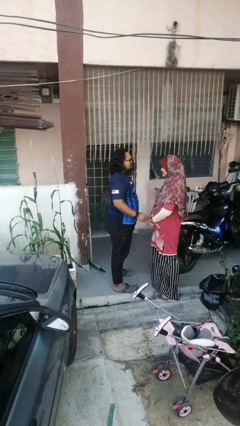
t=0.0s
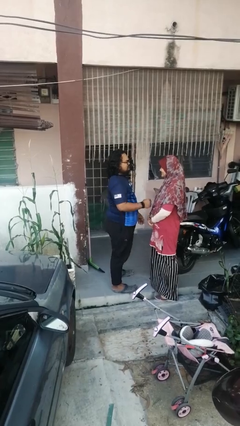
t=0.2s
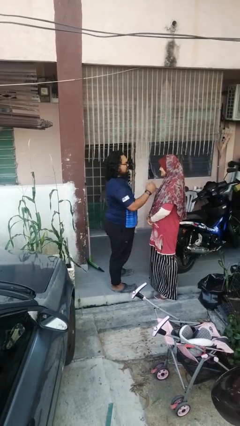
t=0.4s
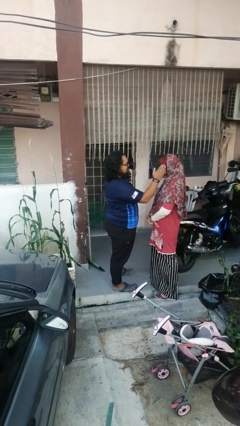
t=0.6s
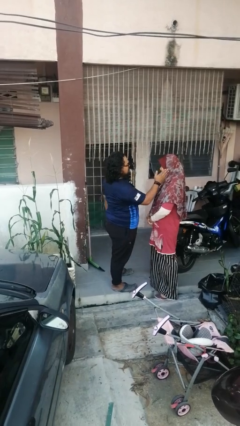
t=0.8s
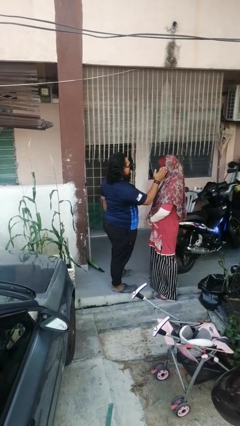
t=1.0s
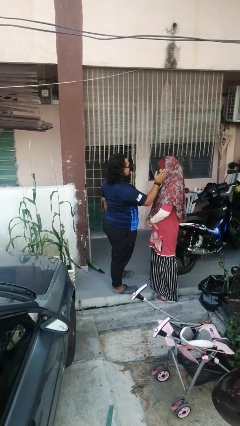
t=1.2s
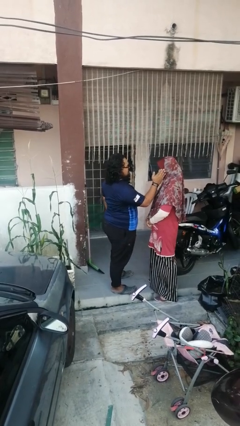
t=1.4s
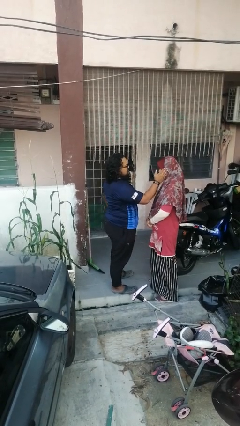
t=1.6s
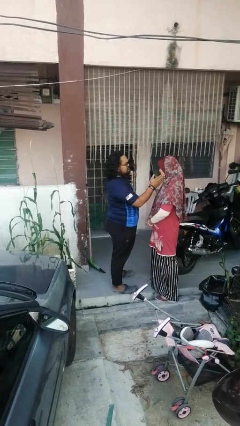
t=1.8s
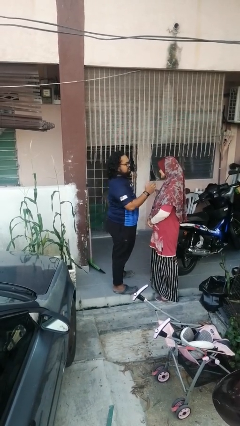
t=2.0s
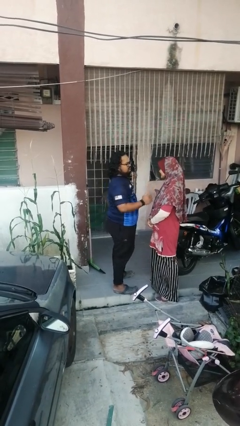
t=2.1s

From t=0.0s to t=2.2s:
person touches face of person

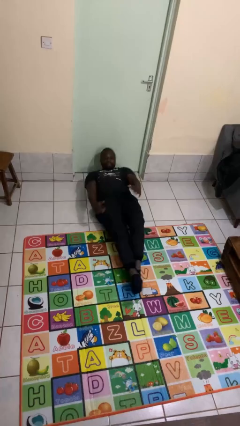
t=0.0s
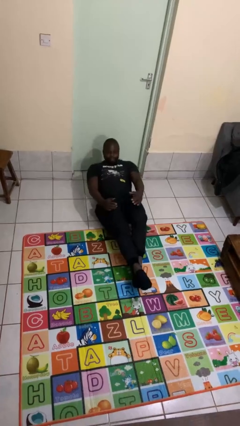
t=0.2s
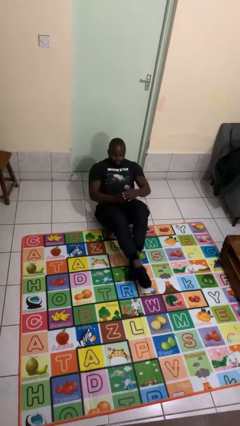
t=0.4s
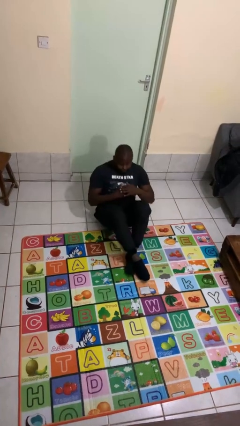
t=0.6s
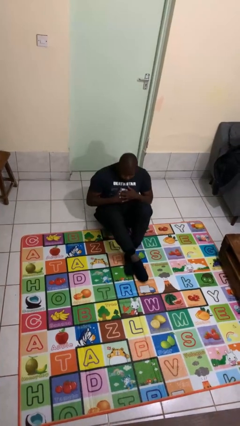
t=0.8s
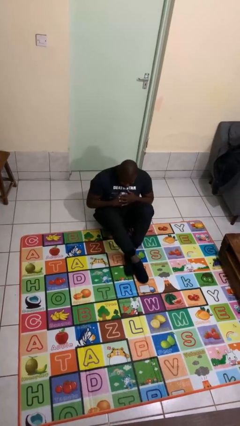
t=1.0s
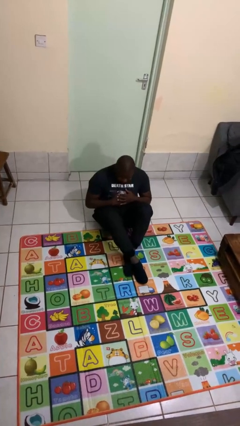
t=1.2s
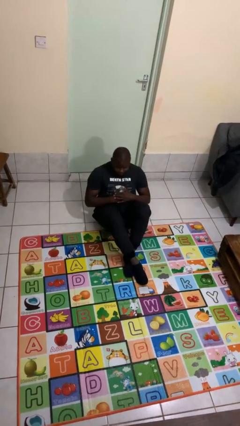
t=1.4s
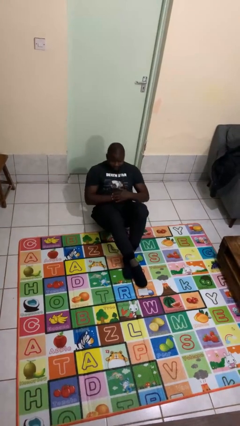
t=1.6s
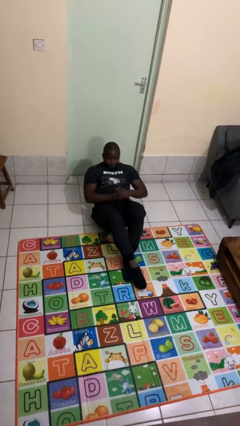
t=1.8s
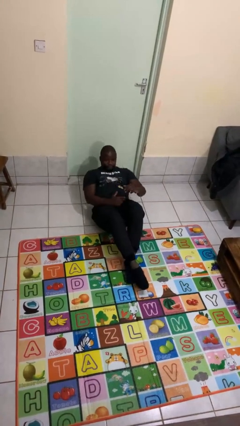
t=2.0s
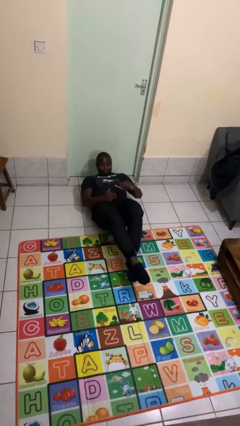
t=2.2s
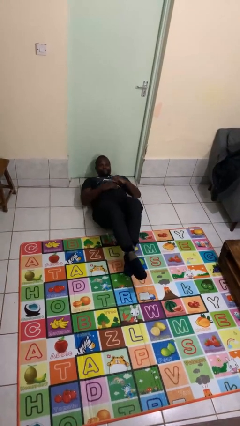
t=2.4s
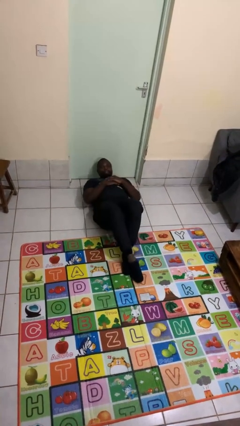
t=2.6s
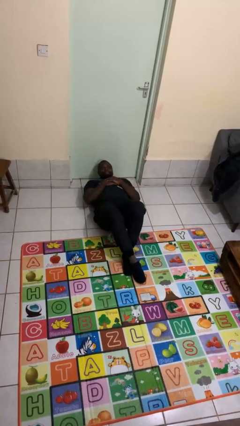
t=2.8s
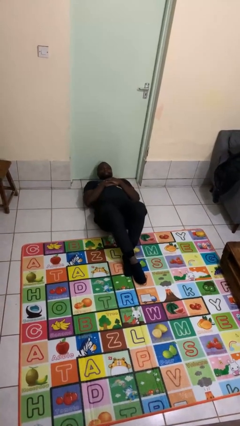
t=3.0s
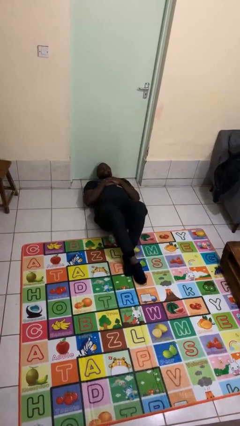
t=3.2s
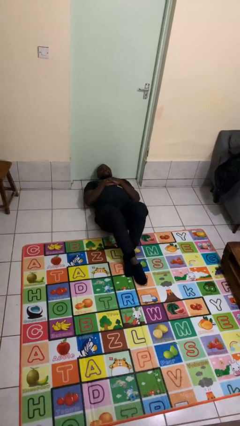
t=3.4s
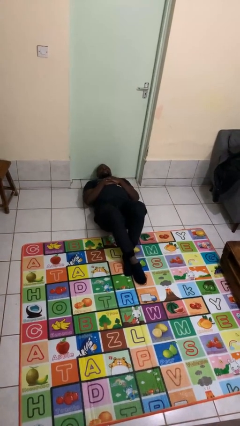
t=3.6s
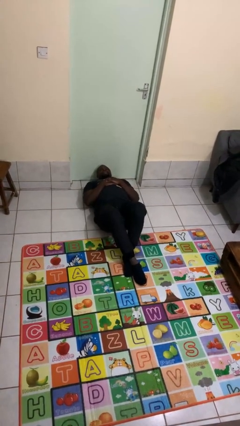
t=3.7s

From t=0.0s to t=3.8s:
person exercises with situp

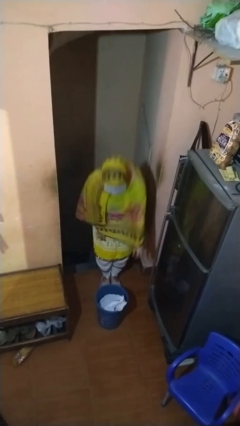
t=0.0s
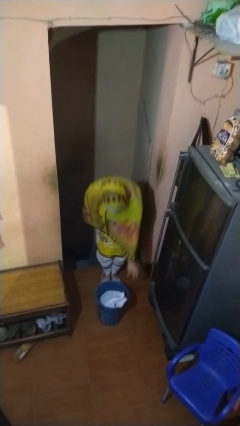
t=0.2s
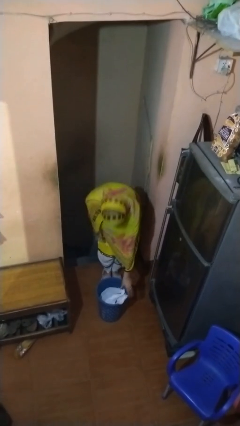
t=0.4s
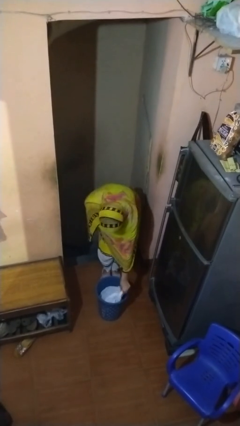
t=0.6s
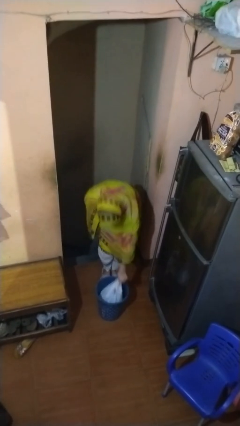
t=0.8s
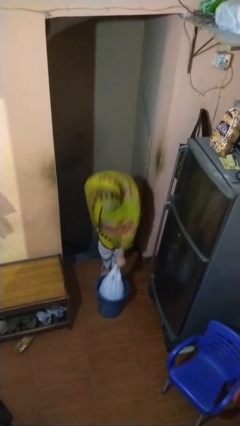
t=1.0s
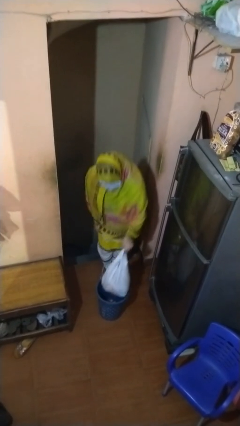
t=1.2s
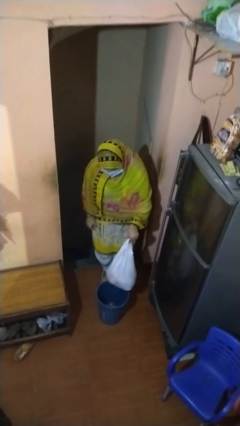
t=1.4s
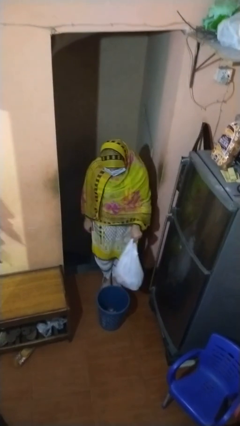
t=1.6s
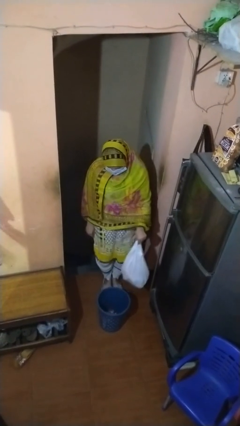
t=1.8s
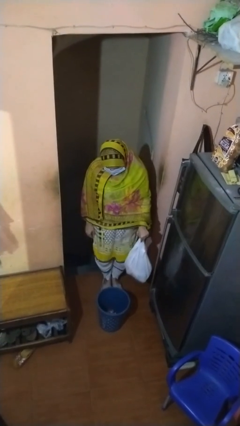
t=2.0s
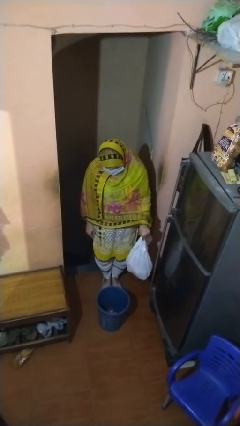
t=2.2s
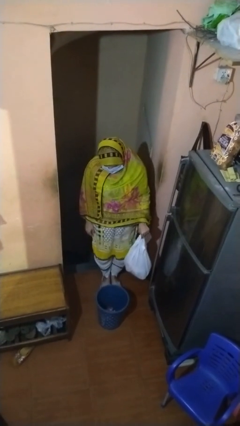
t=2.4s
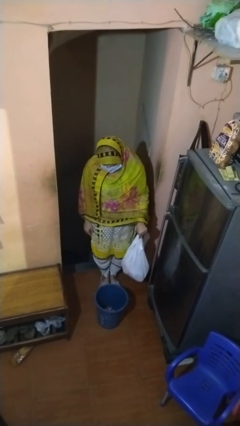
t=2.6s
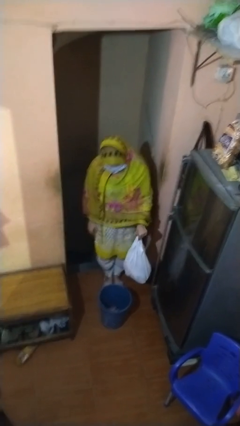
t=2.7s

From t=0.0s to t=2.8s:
person removes trashbag from trashcan

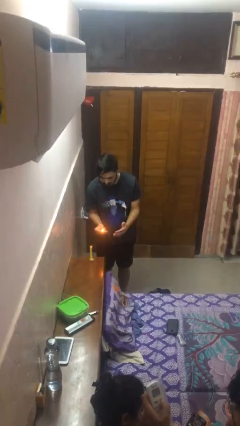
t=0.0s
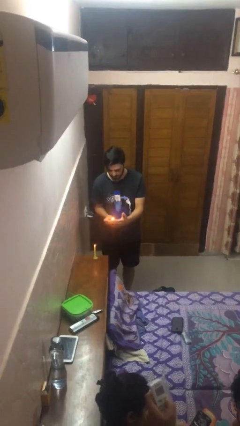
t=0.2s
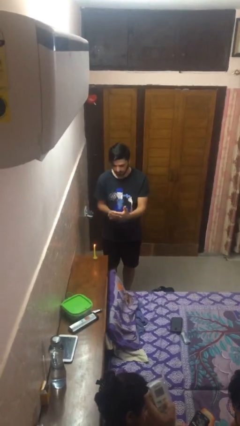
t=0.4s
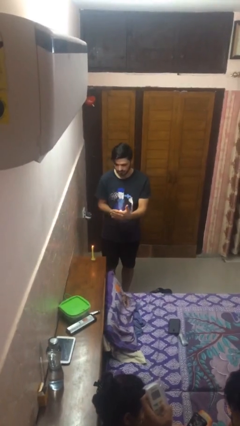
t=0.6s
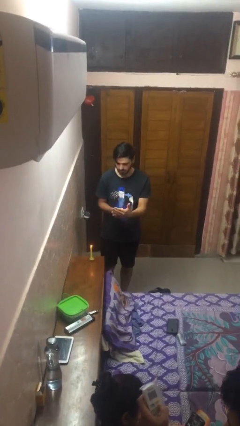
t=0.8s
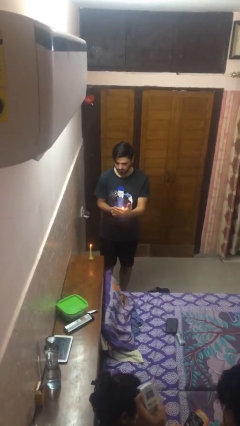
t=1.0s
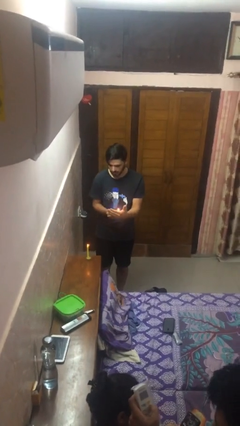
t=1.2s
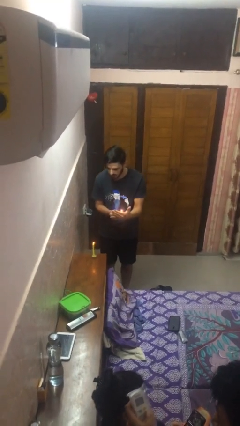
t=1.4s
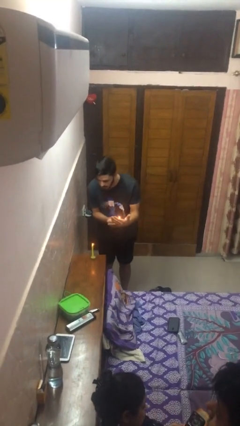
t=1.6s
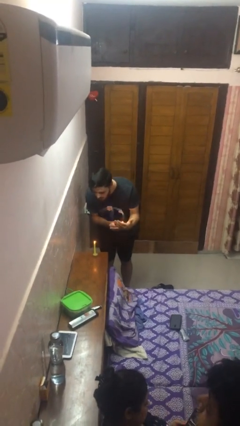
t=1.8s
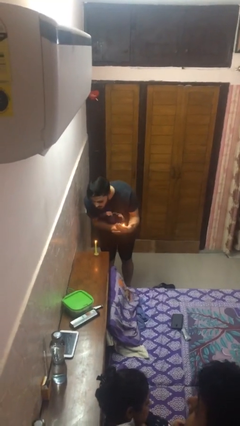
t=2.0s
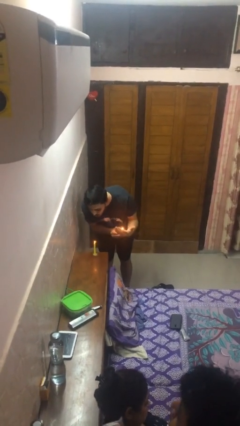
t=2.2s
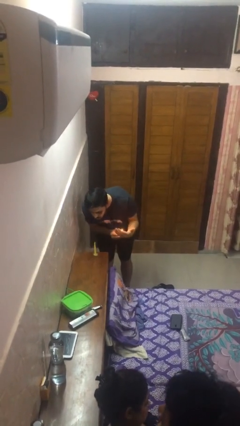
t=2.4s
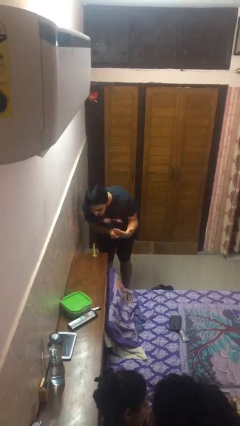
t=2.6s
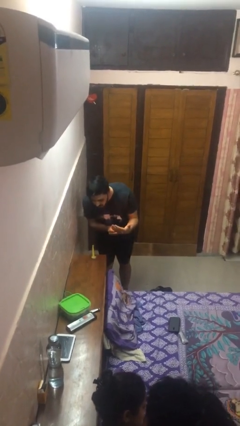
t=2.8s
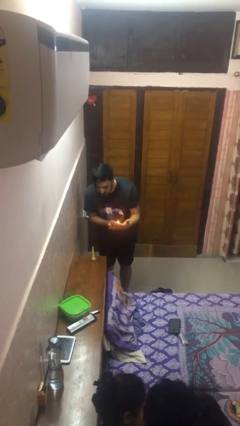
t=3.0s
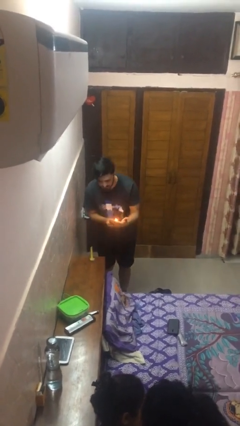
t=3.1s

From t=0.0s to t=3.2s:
person extinguishes candle

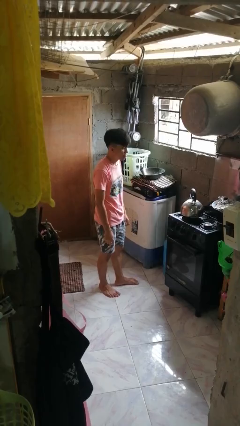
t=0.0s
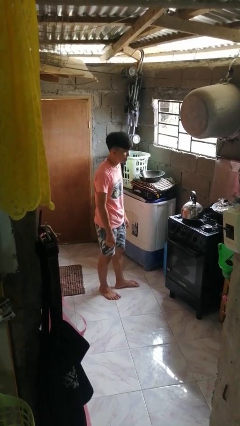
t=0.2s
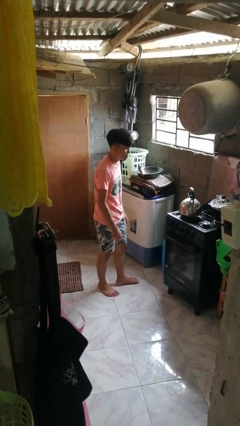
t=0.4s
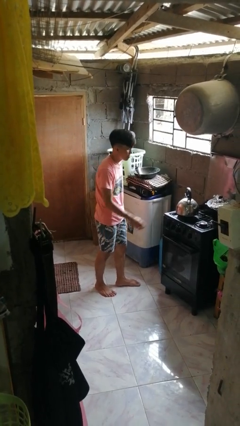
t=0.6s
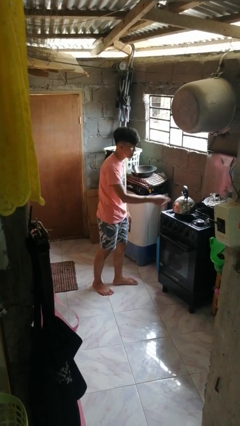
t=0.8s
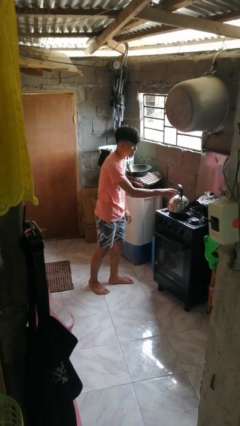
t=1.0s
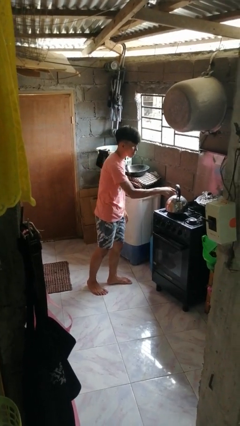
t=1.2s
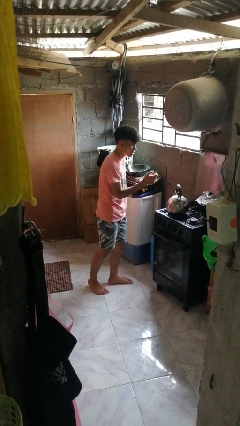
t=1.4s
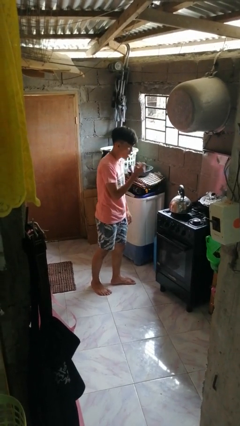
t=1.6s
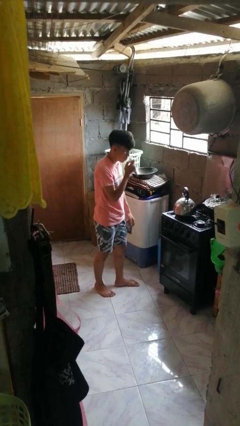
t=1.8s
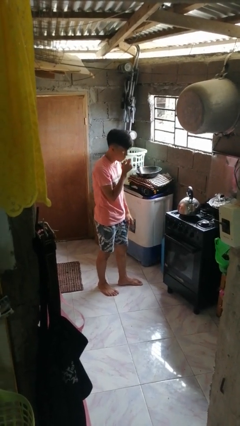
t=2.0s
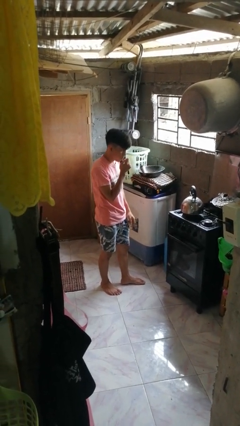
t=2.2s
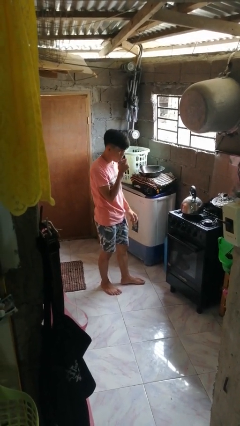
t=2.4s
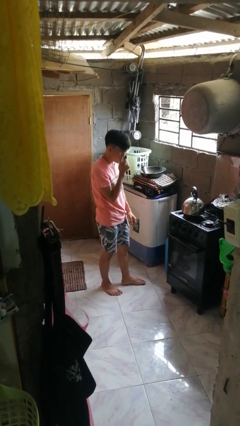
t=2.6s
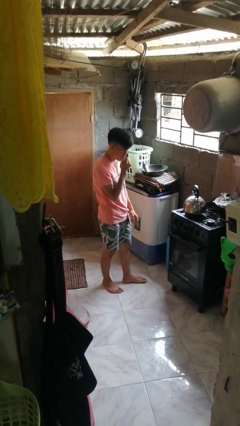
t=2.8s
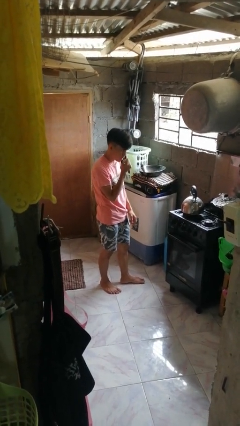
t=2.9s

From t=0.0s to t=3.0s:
person burns hand

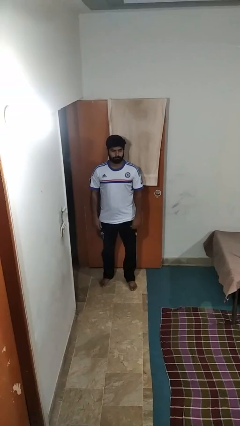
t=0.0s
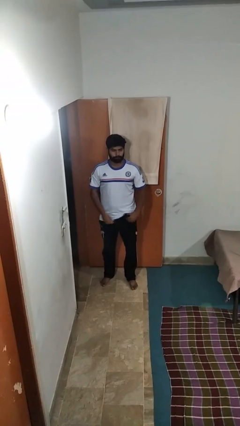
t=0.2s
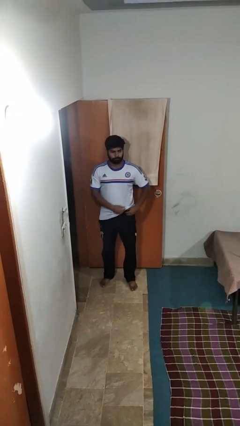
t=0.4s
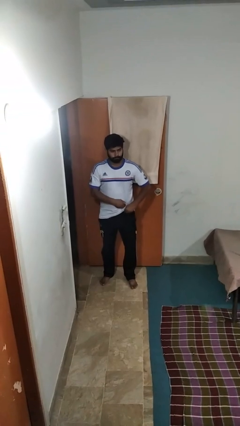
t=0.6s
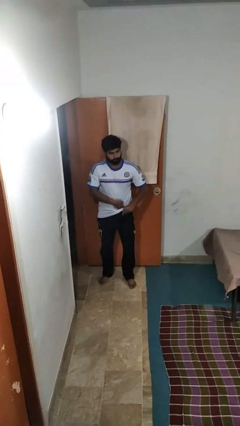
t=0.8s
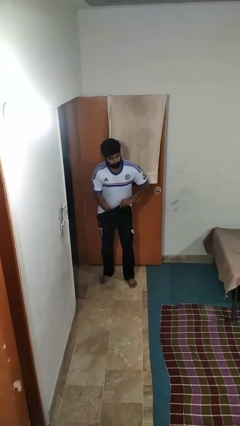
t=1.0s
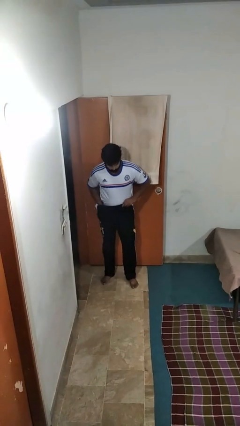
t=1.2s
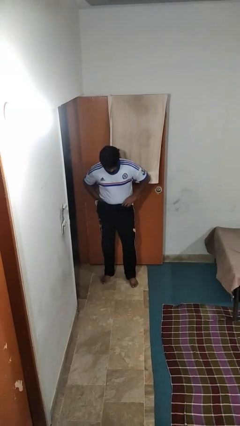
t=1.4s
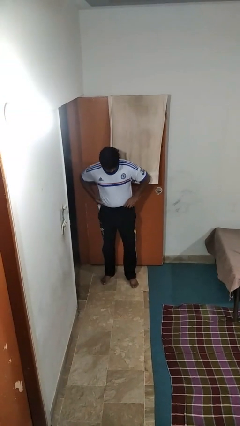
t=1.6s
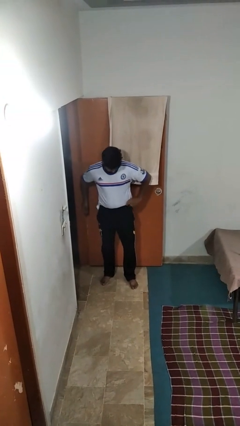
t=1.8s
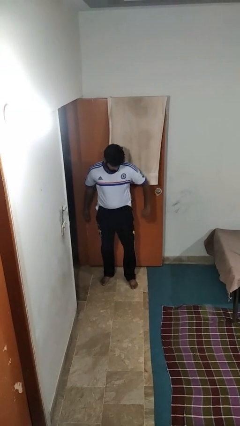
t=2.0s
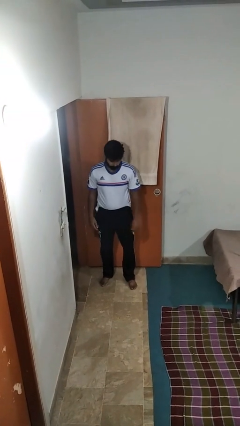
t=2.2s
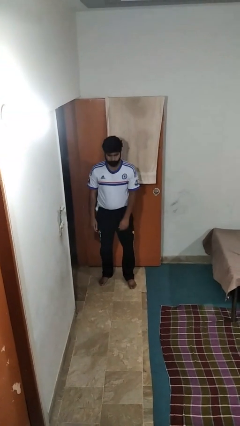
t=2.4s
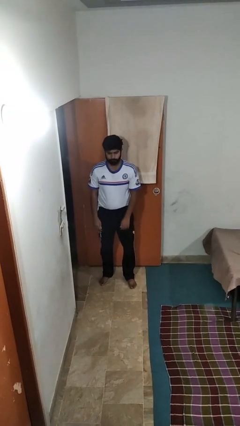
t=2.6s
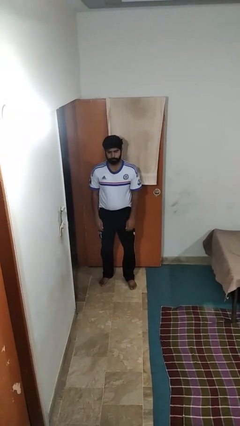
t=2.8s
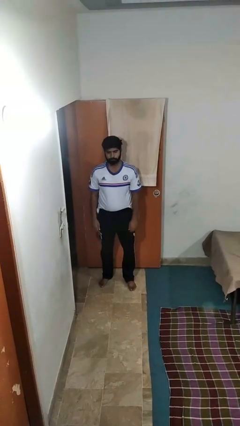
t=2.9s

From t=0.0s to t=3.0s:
person tucks in shirt
